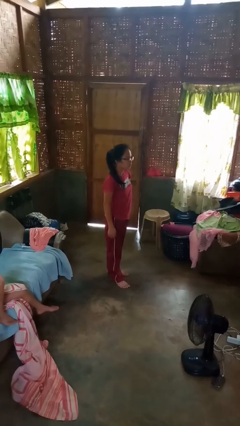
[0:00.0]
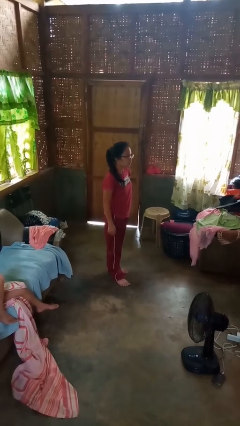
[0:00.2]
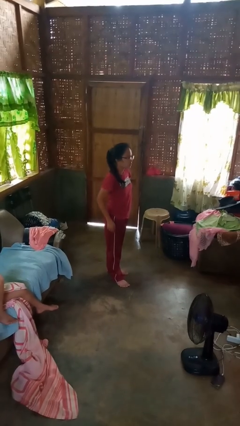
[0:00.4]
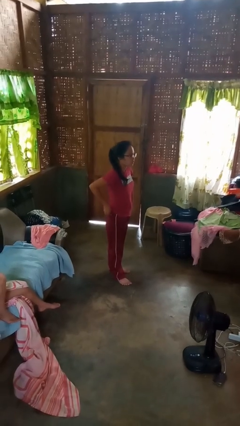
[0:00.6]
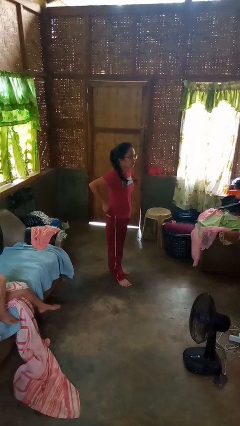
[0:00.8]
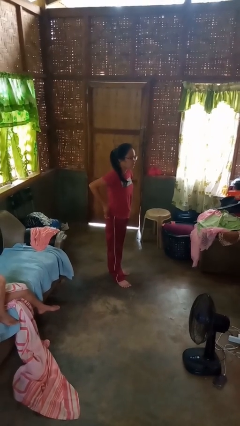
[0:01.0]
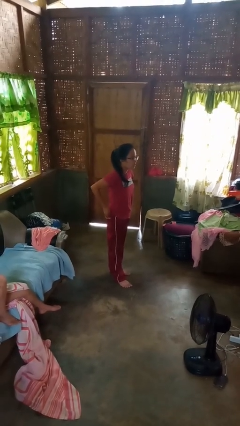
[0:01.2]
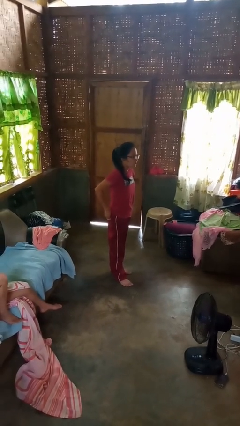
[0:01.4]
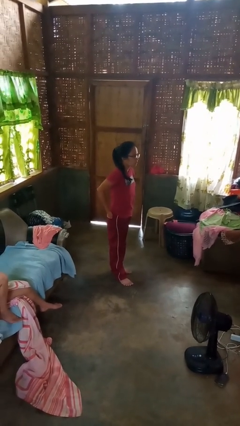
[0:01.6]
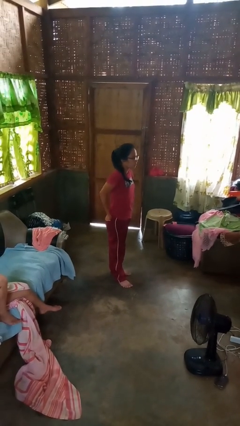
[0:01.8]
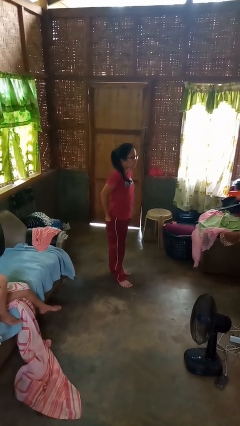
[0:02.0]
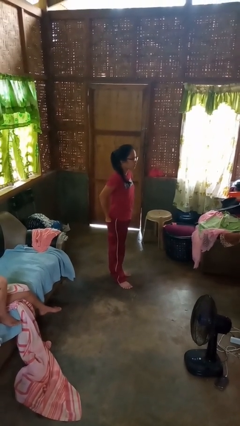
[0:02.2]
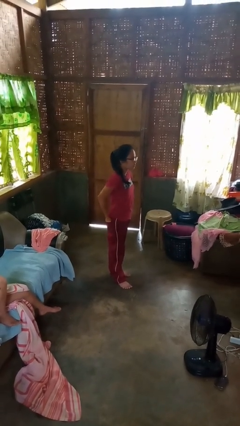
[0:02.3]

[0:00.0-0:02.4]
person puts hands in back pockets

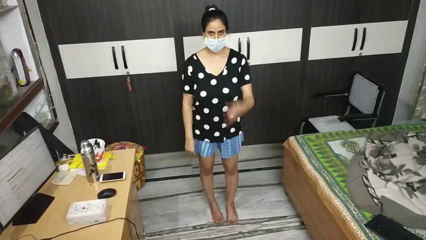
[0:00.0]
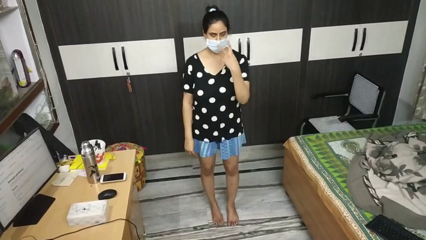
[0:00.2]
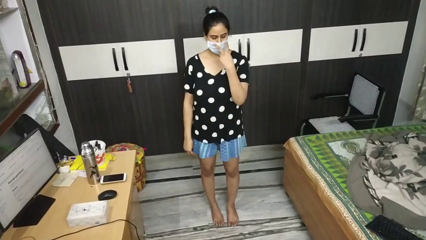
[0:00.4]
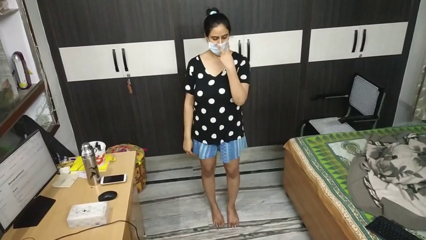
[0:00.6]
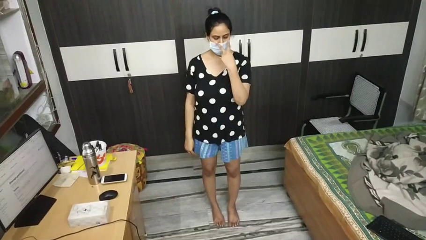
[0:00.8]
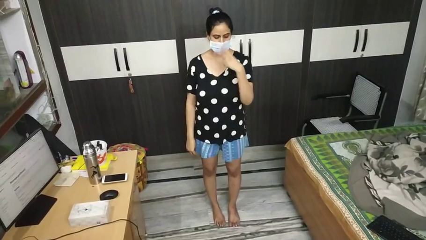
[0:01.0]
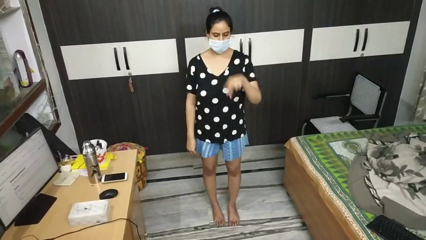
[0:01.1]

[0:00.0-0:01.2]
person gestures watch closely

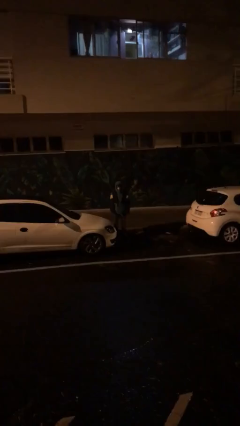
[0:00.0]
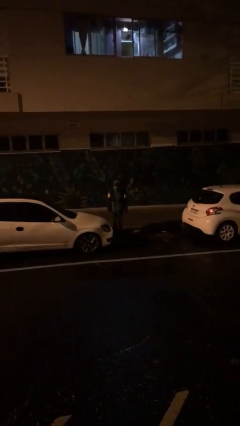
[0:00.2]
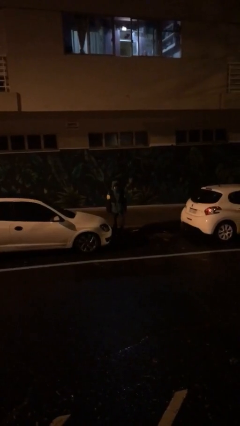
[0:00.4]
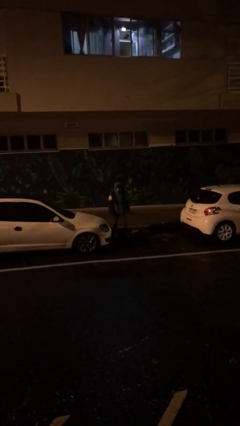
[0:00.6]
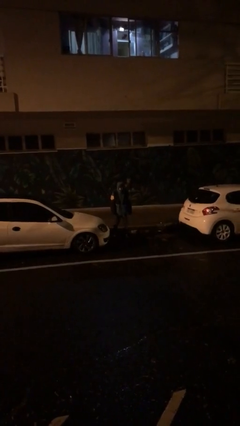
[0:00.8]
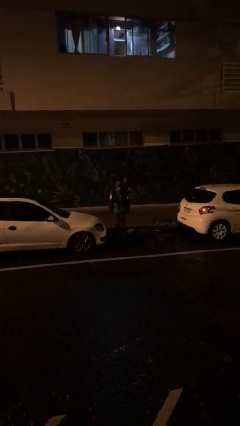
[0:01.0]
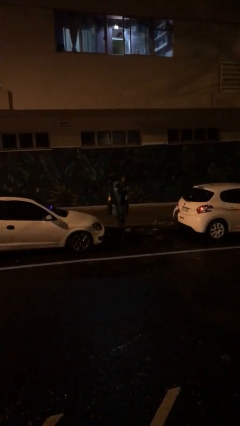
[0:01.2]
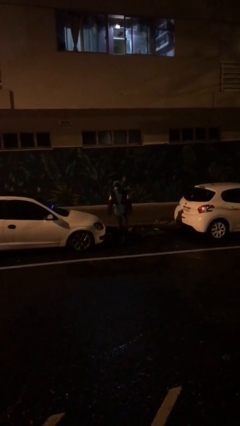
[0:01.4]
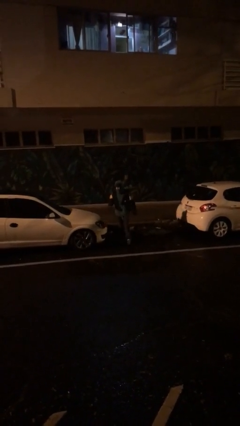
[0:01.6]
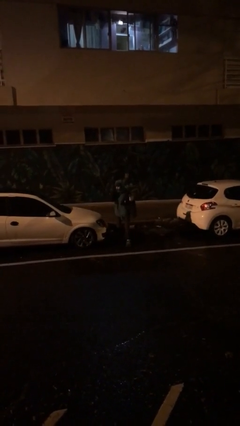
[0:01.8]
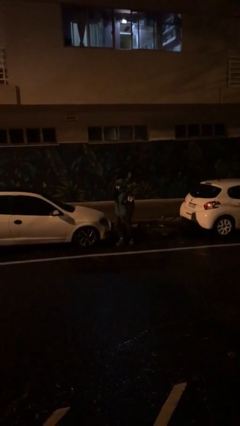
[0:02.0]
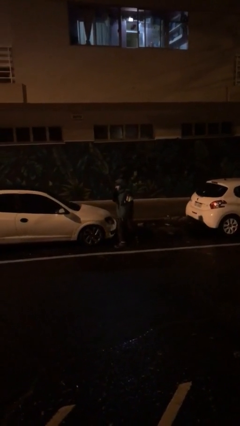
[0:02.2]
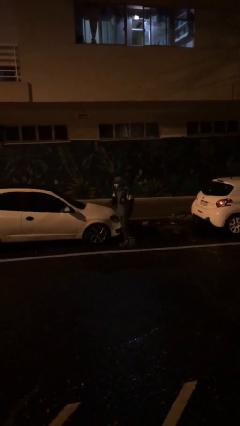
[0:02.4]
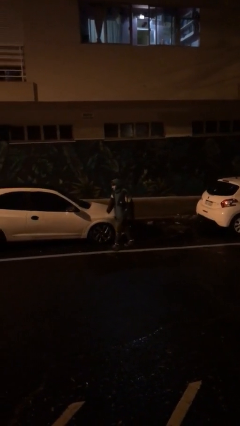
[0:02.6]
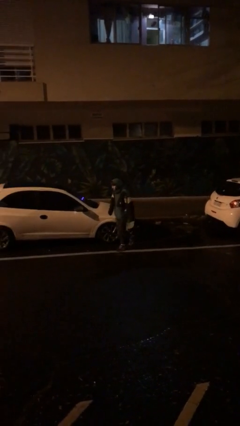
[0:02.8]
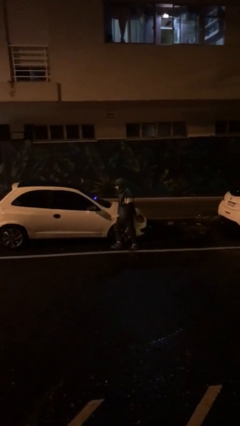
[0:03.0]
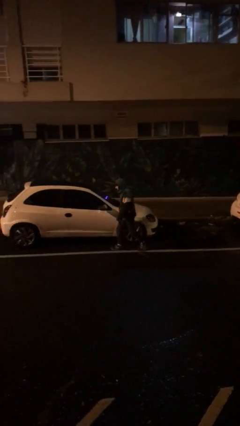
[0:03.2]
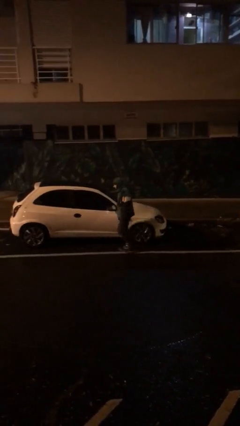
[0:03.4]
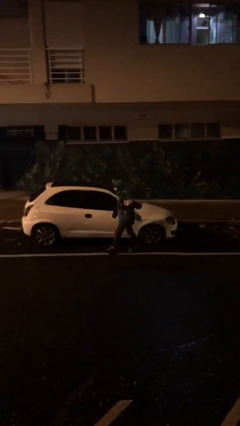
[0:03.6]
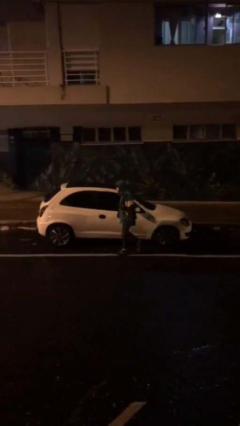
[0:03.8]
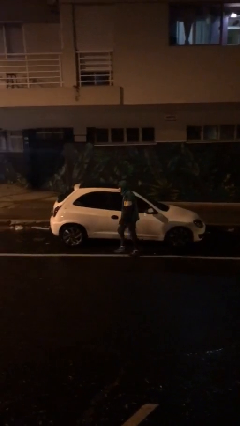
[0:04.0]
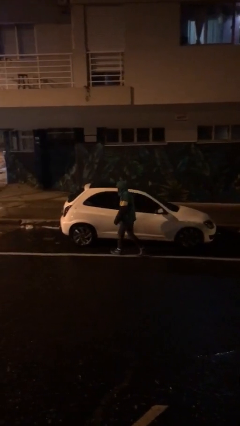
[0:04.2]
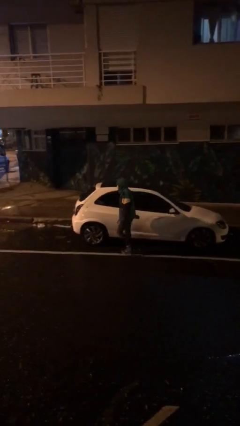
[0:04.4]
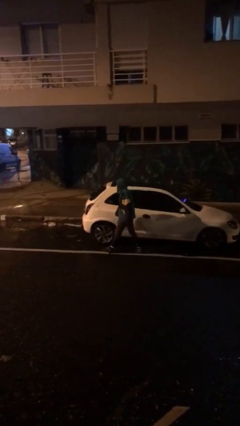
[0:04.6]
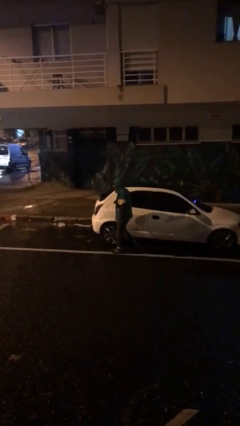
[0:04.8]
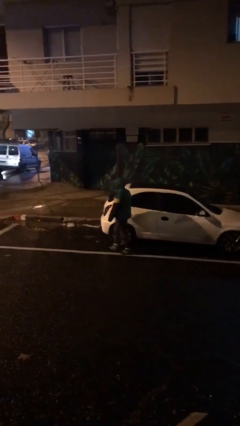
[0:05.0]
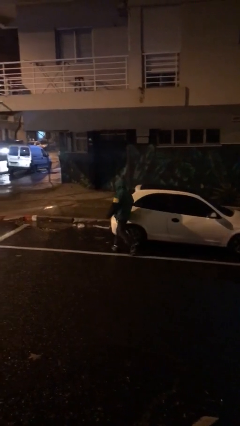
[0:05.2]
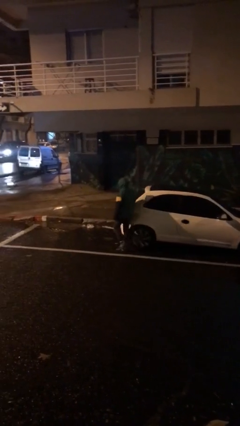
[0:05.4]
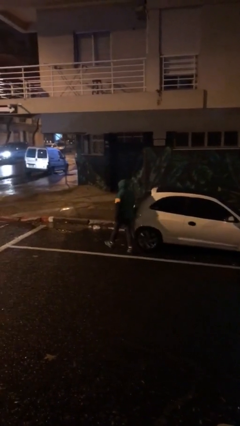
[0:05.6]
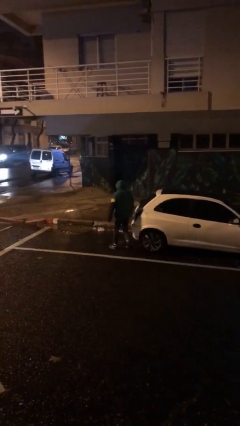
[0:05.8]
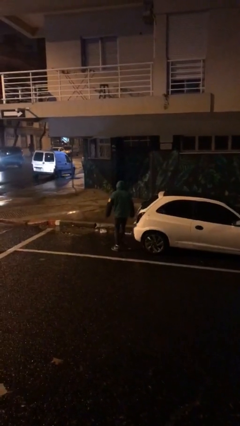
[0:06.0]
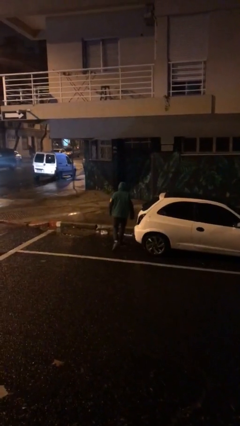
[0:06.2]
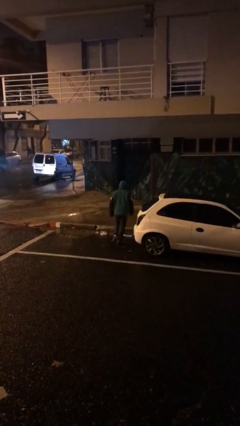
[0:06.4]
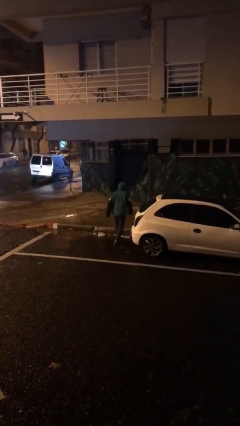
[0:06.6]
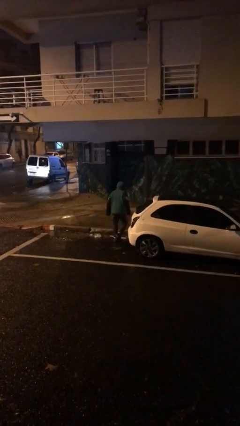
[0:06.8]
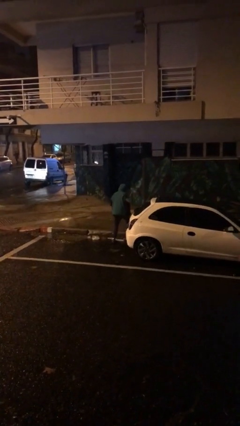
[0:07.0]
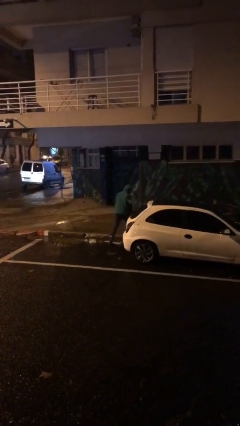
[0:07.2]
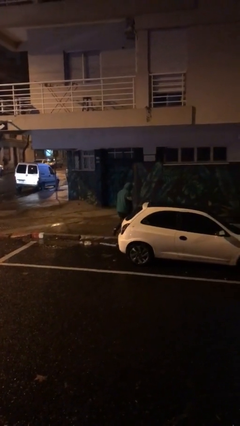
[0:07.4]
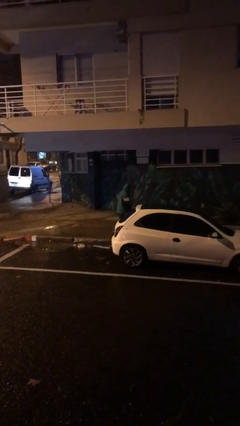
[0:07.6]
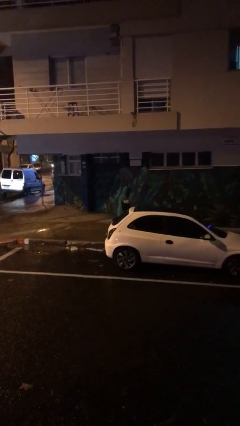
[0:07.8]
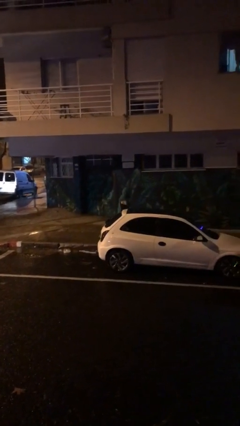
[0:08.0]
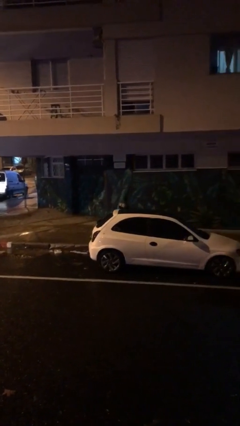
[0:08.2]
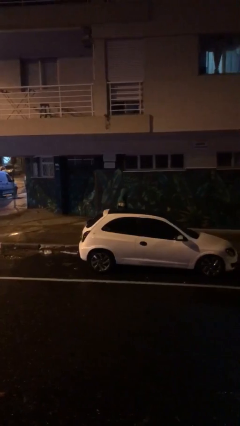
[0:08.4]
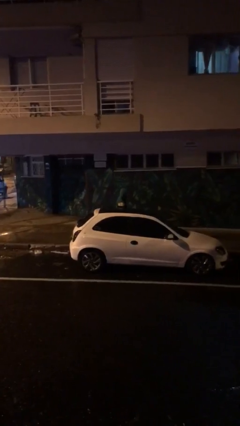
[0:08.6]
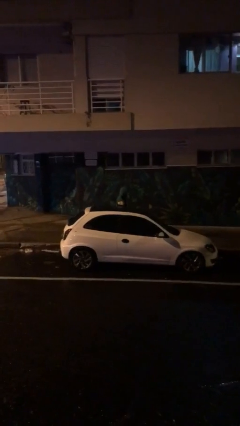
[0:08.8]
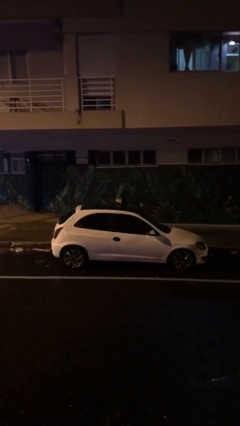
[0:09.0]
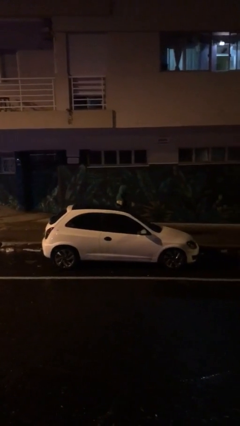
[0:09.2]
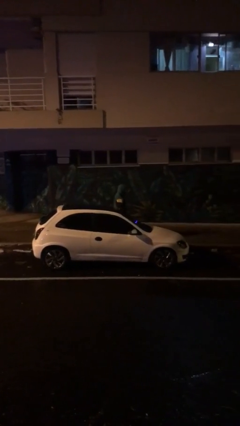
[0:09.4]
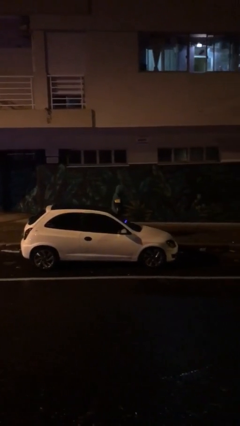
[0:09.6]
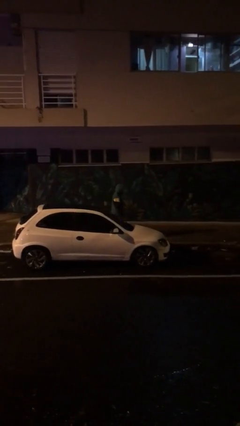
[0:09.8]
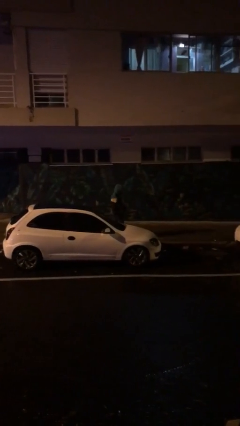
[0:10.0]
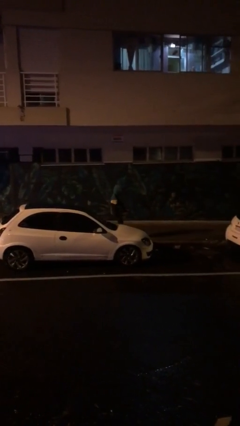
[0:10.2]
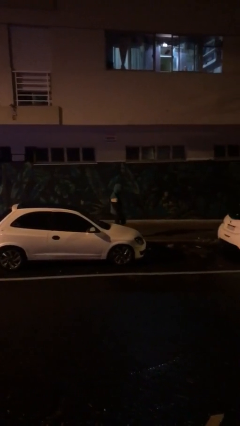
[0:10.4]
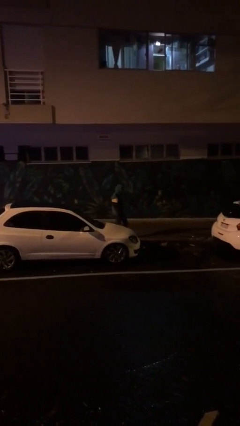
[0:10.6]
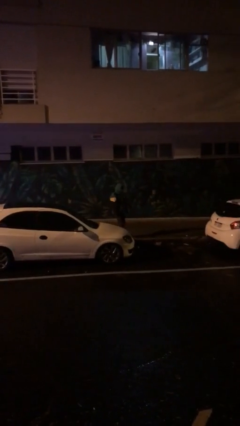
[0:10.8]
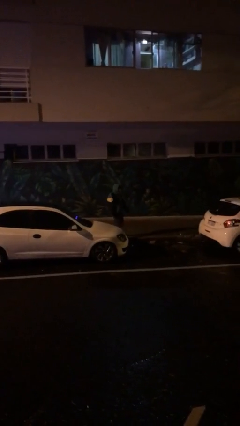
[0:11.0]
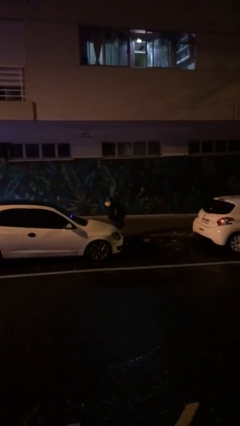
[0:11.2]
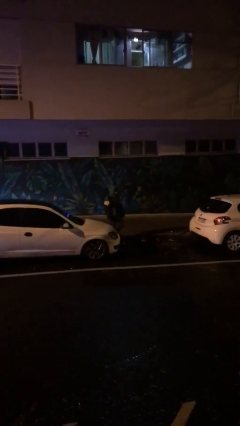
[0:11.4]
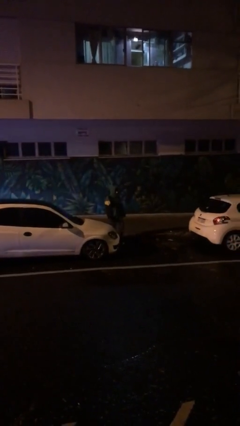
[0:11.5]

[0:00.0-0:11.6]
person walks around car

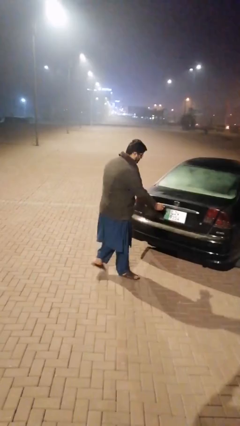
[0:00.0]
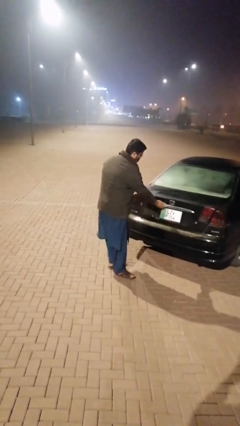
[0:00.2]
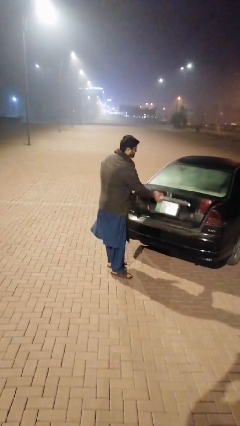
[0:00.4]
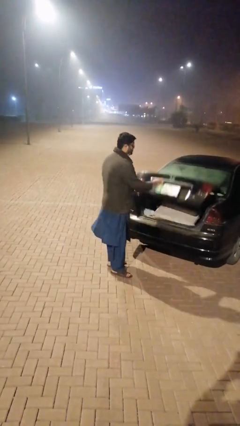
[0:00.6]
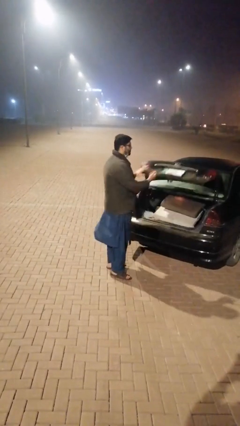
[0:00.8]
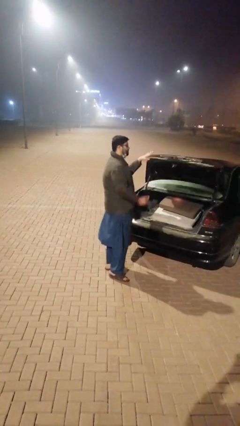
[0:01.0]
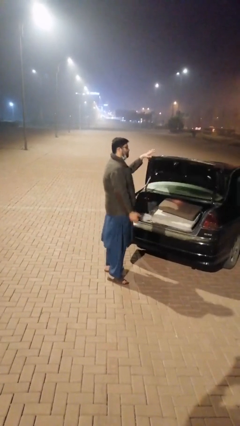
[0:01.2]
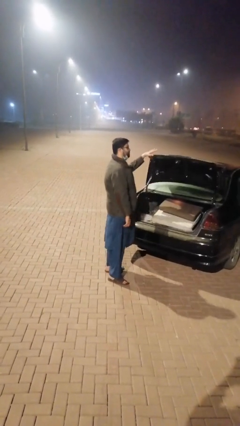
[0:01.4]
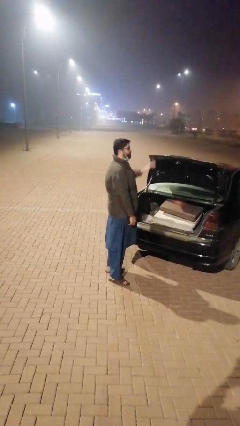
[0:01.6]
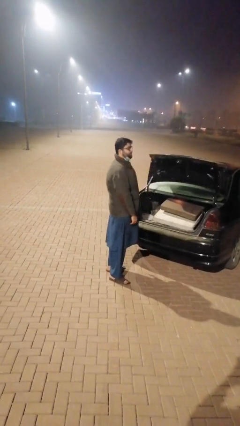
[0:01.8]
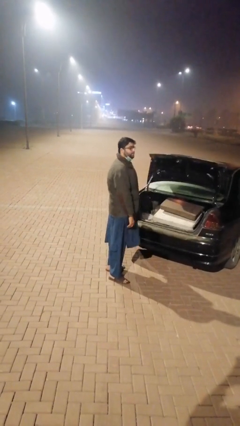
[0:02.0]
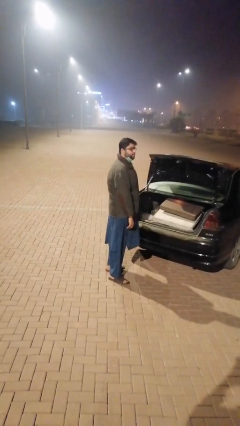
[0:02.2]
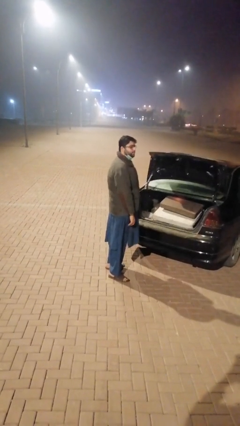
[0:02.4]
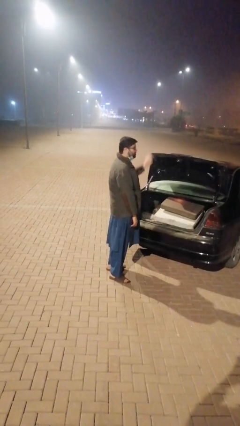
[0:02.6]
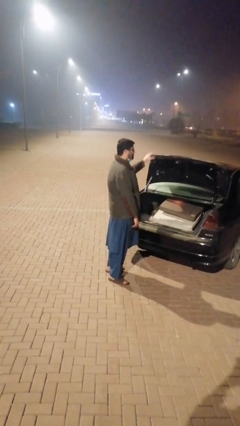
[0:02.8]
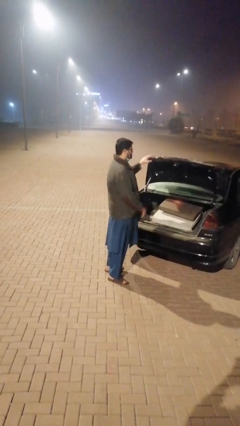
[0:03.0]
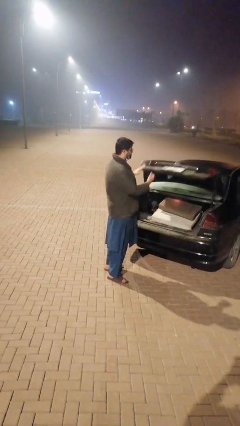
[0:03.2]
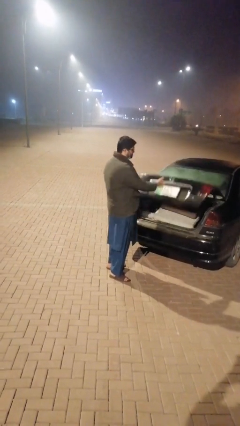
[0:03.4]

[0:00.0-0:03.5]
person opens car trunk
